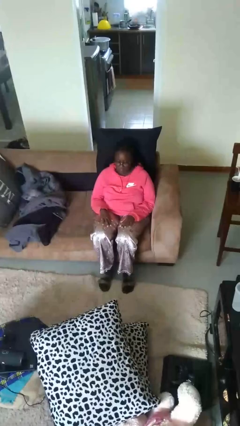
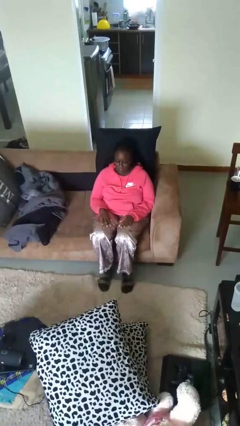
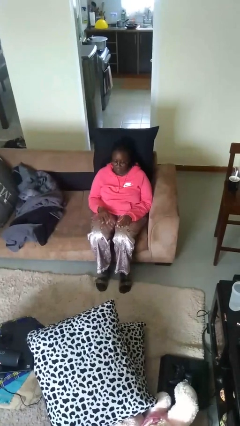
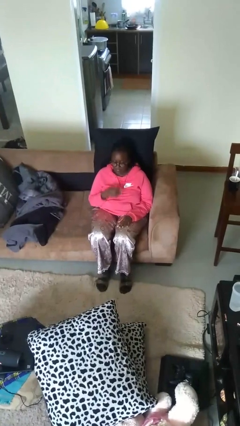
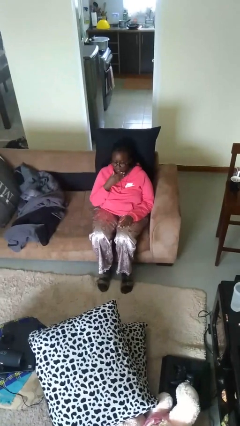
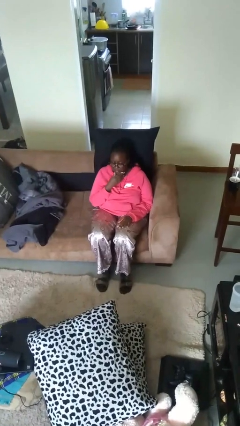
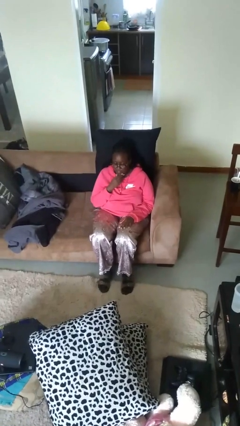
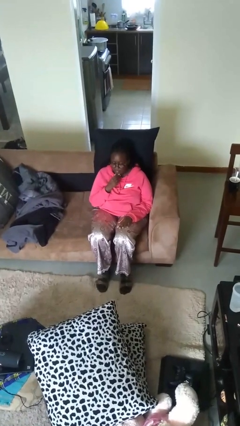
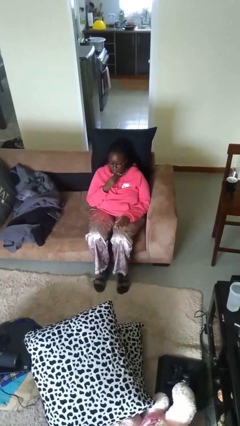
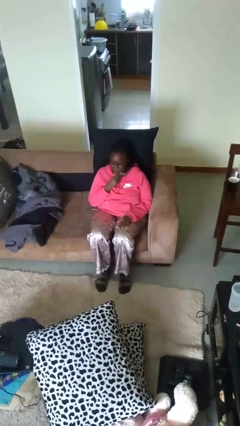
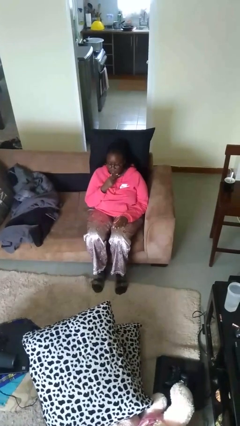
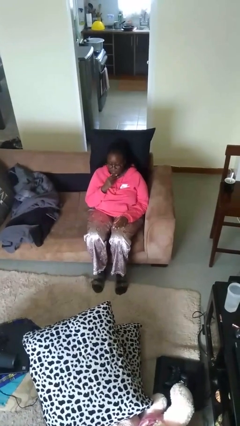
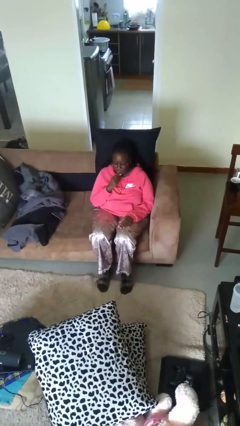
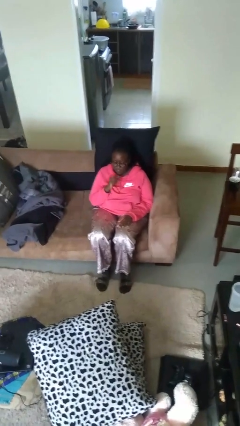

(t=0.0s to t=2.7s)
person strokes chin

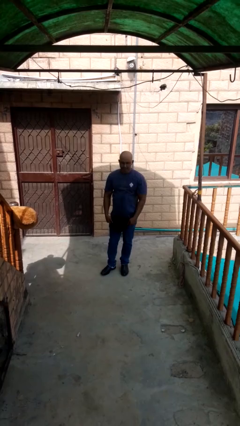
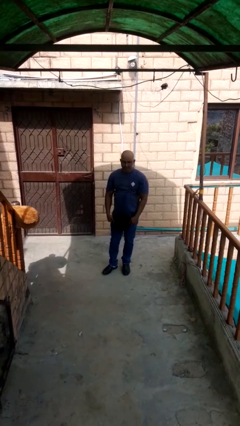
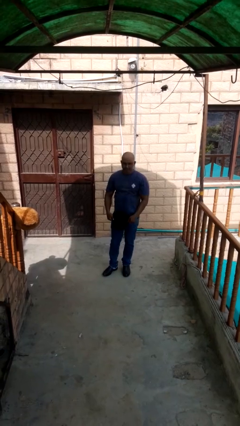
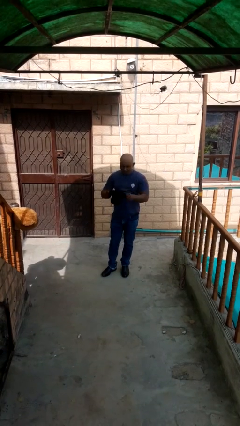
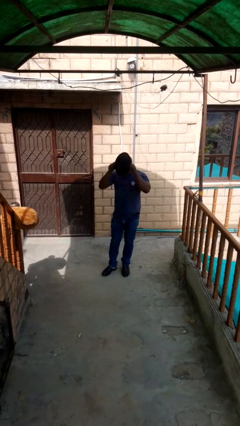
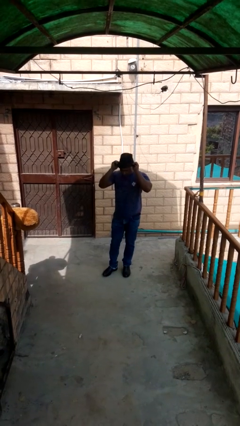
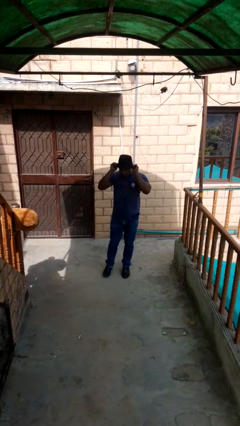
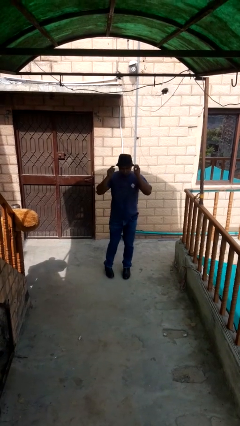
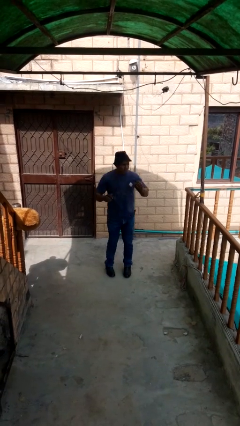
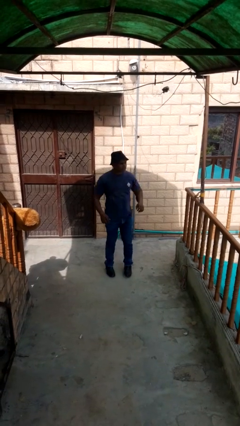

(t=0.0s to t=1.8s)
person puts on hat

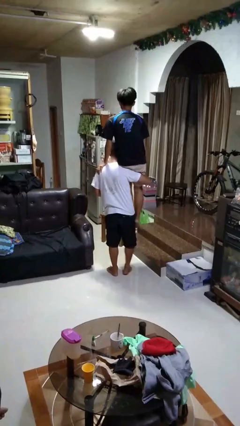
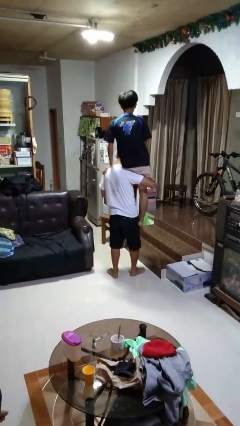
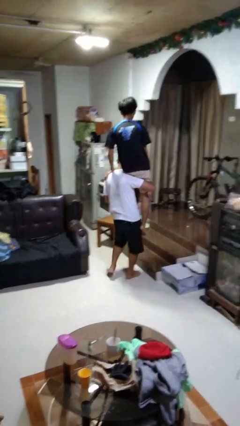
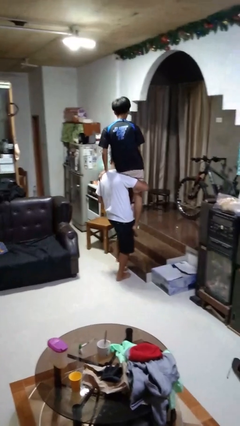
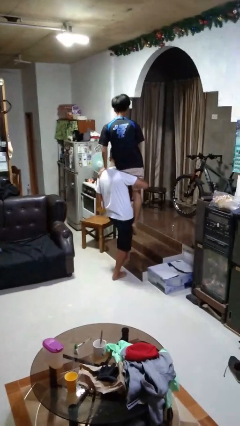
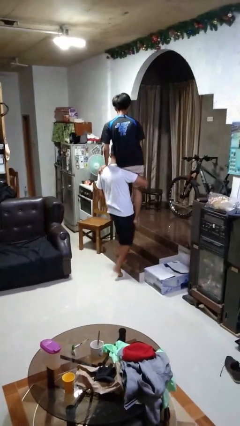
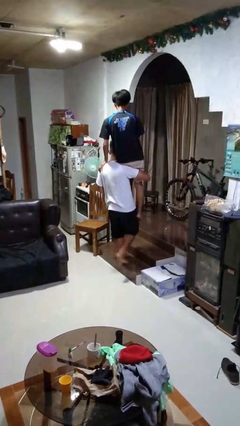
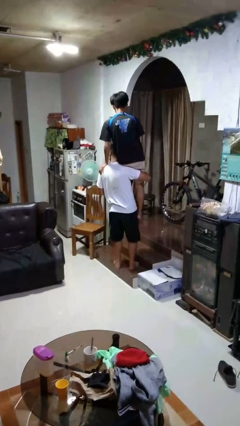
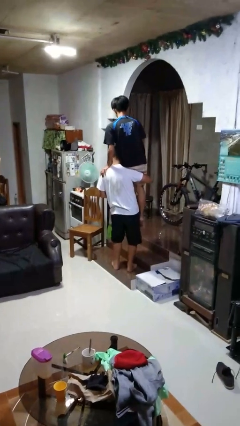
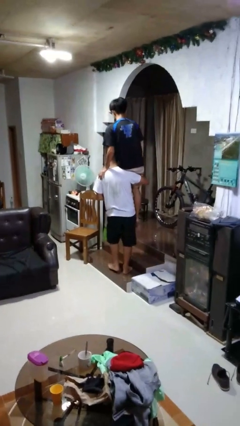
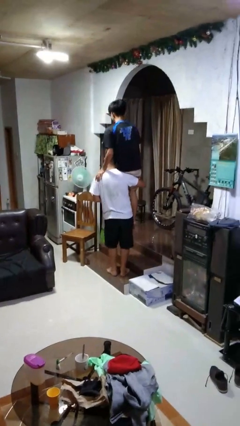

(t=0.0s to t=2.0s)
person carries person on shoulders

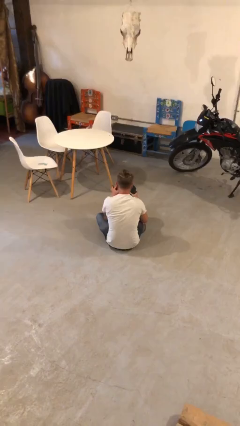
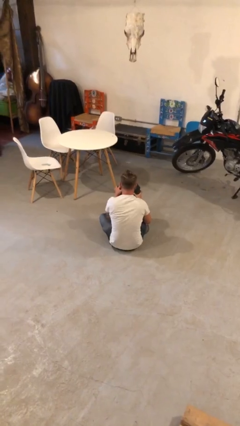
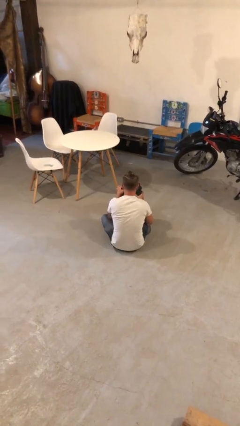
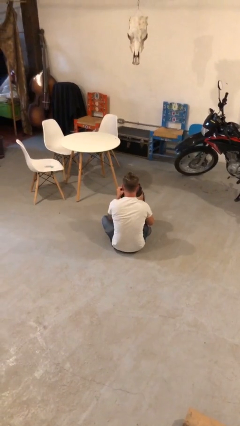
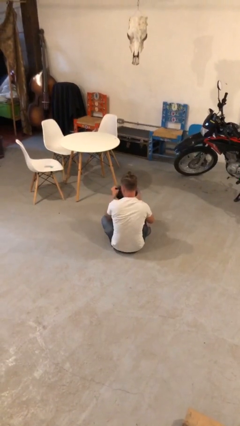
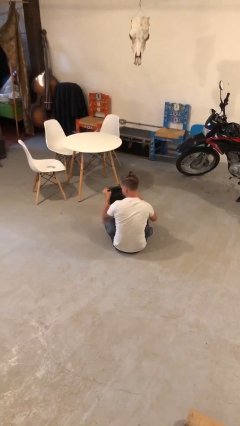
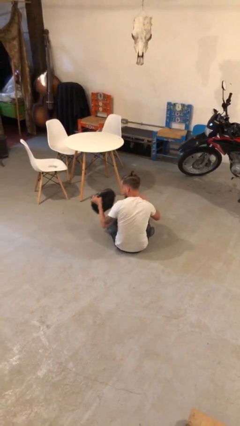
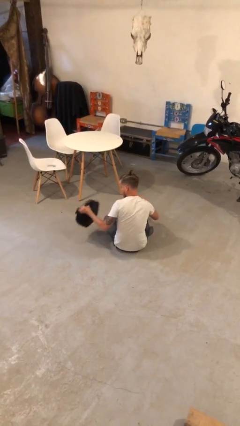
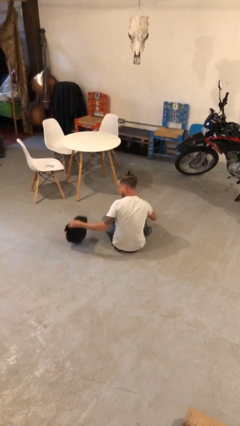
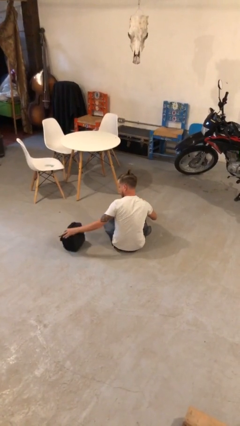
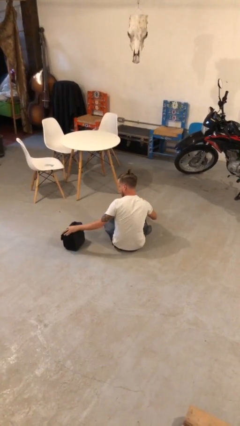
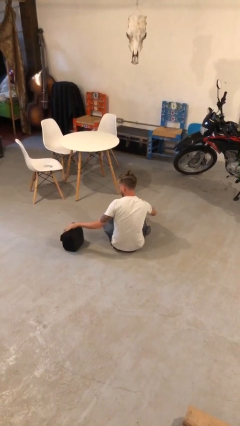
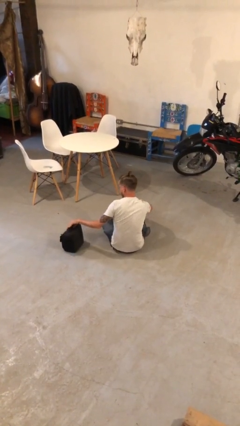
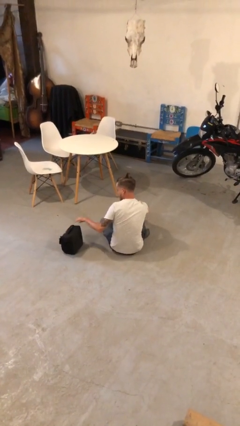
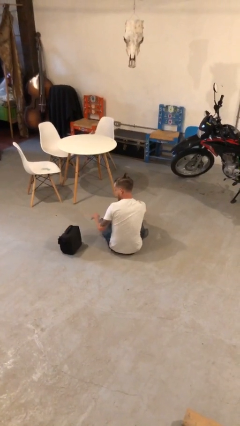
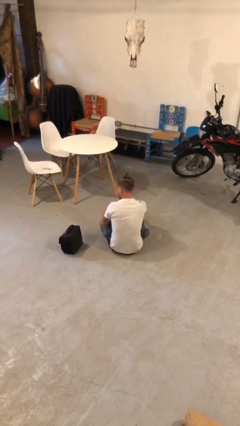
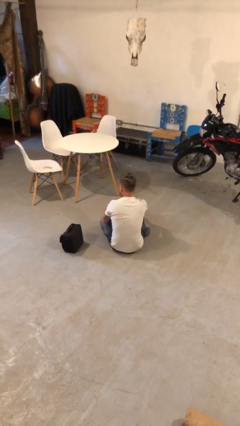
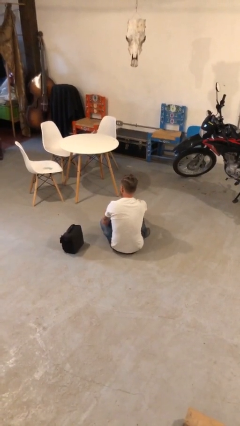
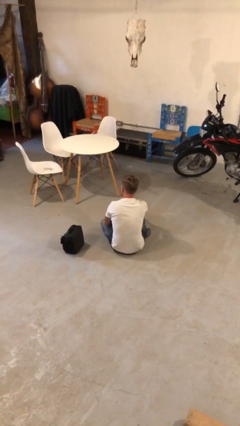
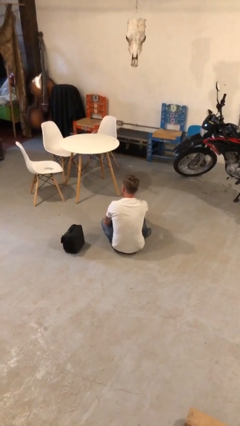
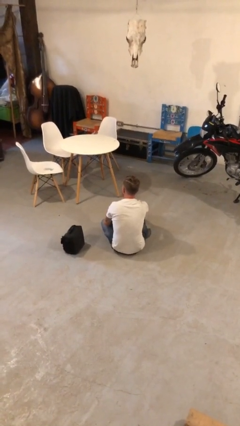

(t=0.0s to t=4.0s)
person puts down object on floor

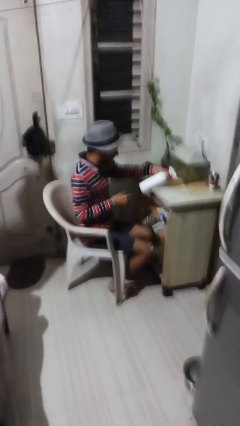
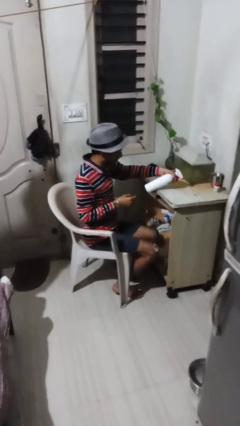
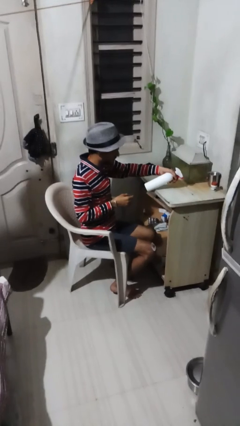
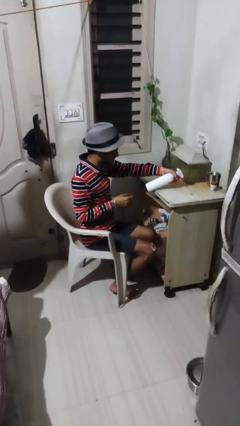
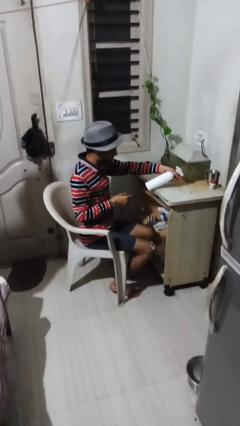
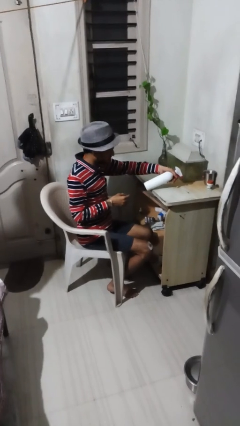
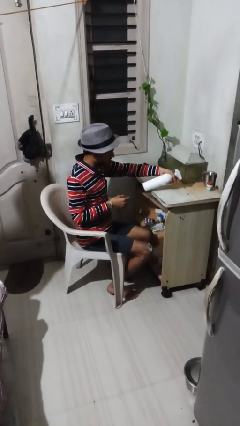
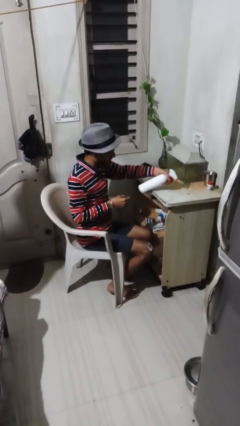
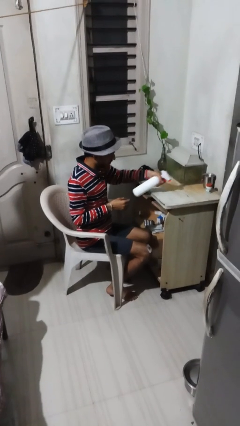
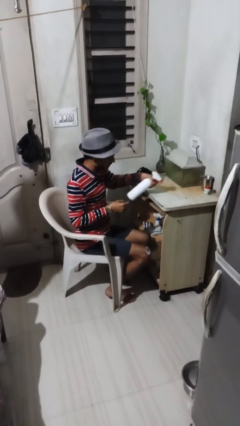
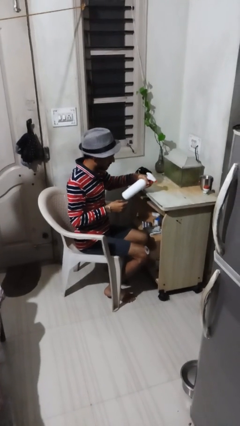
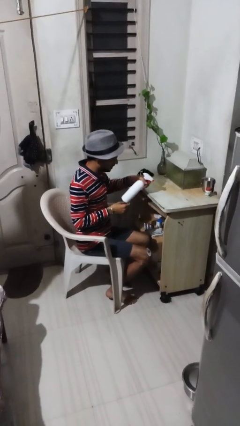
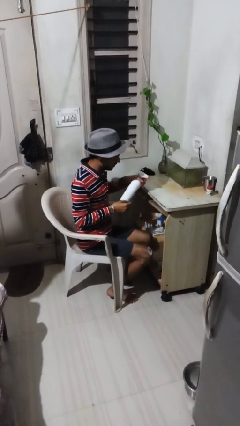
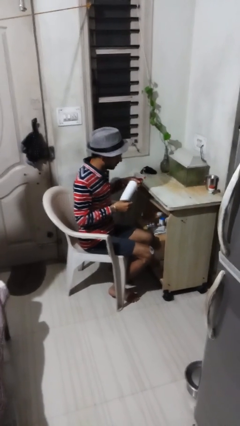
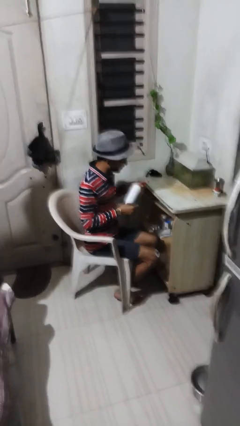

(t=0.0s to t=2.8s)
person sprays from bottle

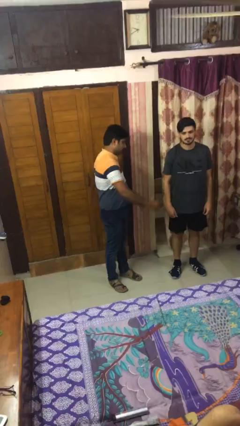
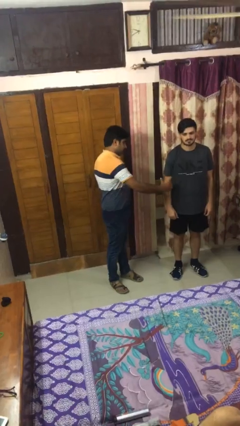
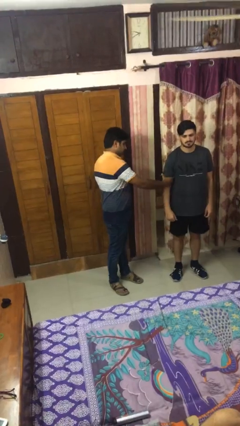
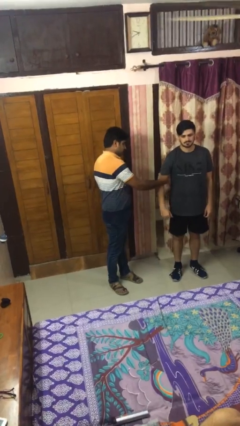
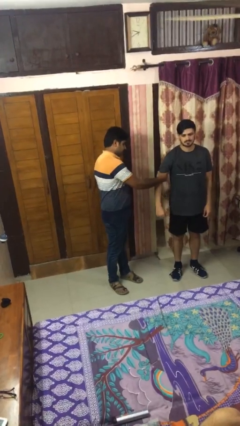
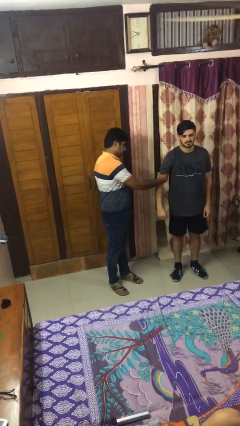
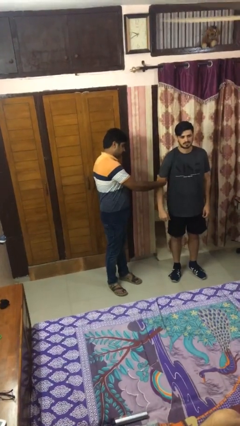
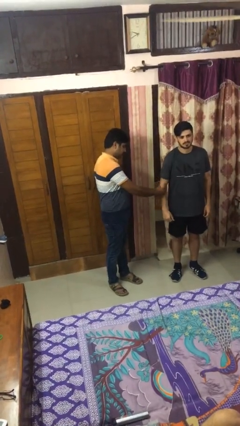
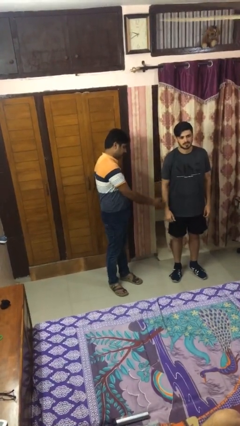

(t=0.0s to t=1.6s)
person grabs person by bicep

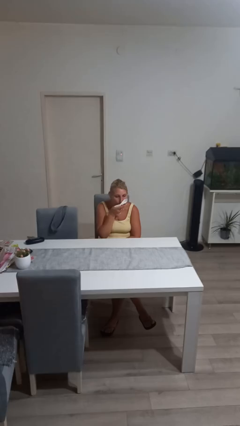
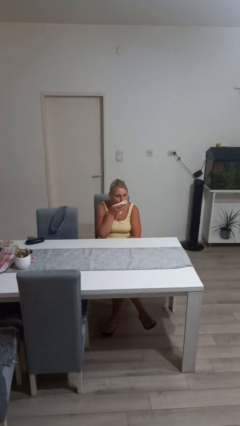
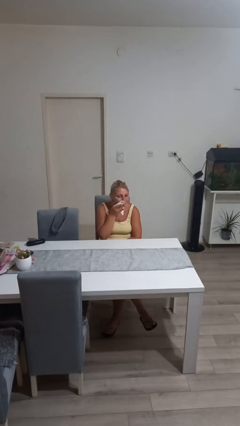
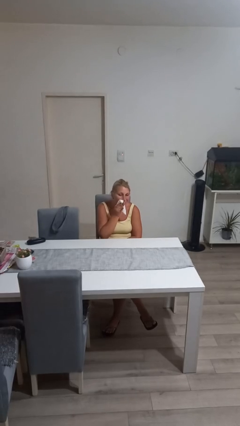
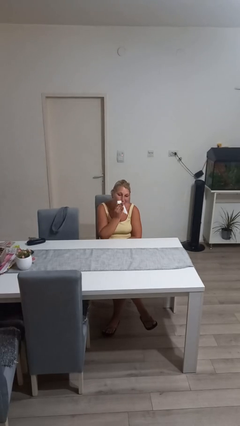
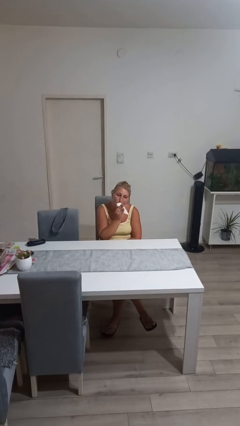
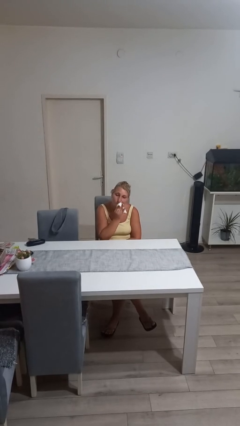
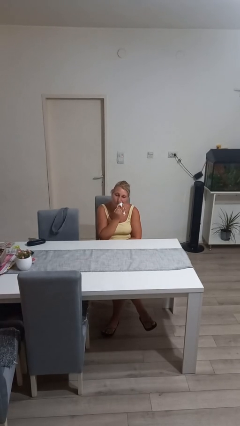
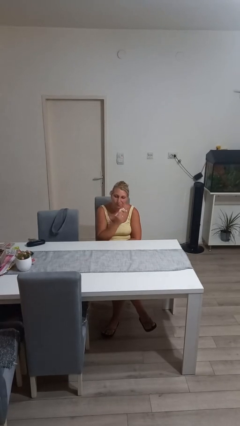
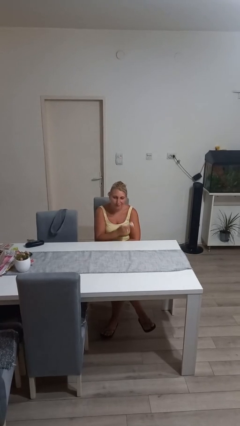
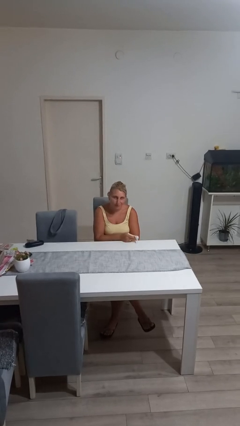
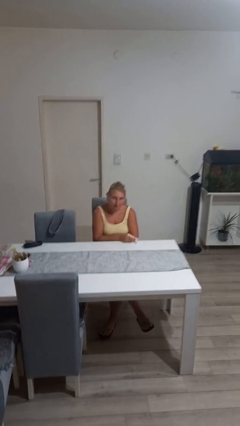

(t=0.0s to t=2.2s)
person wipes mouth with napkin

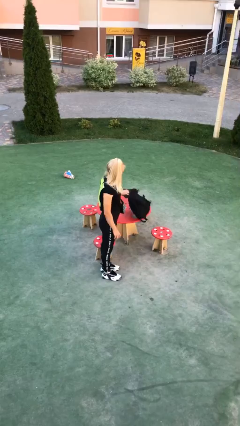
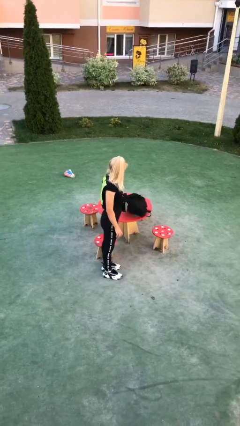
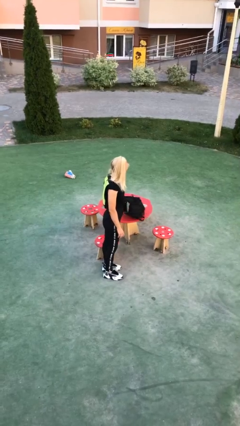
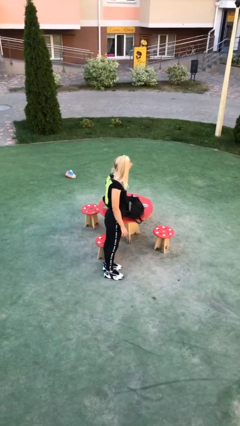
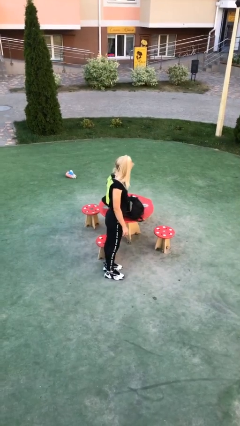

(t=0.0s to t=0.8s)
person puts down object on table
